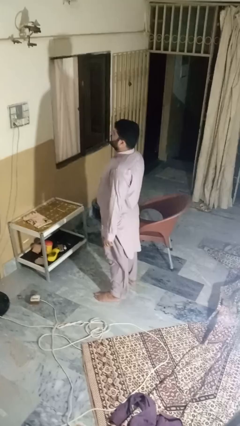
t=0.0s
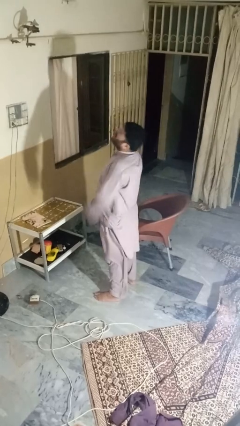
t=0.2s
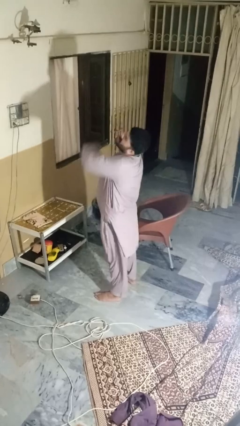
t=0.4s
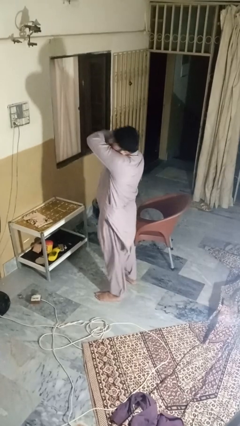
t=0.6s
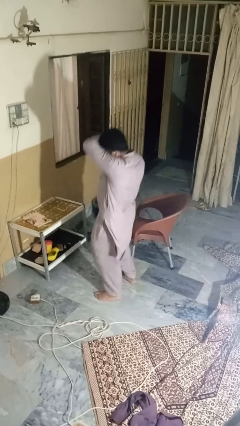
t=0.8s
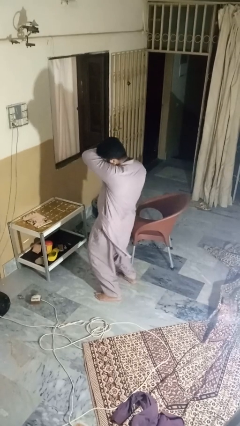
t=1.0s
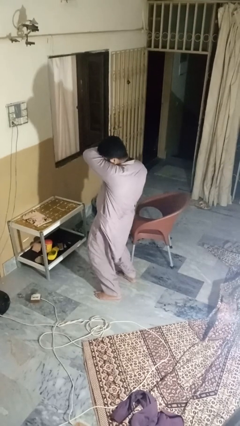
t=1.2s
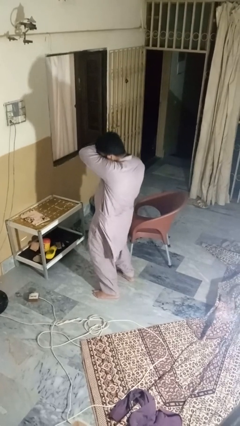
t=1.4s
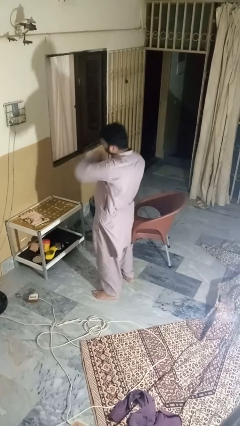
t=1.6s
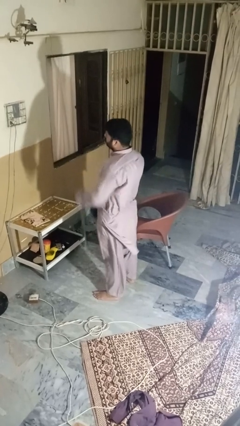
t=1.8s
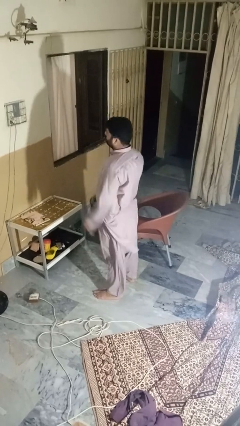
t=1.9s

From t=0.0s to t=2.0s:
person sneezes into arm

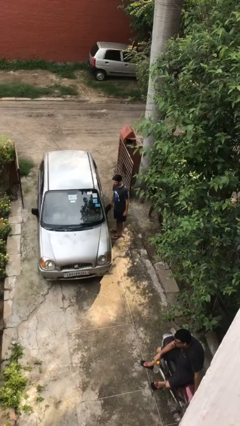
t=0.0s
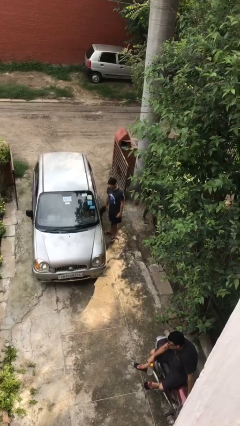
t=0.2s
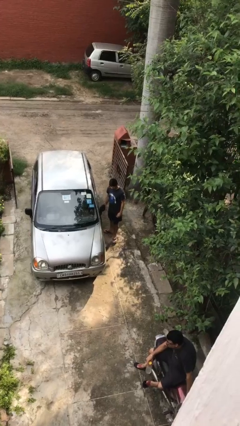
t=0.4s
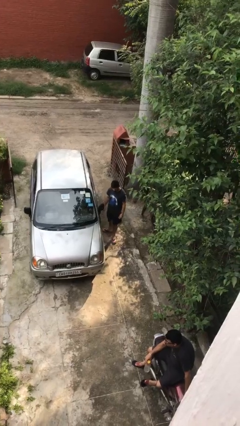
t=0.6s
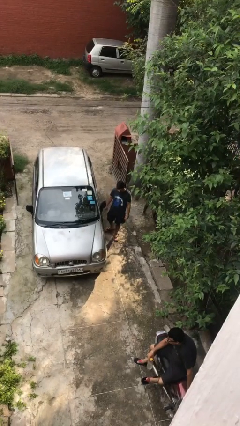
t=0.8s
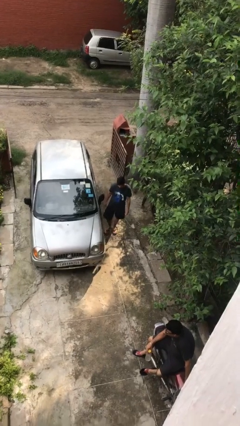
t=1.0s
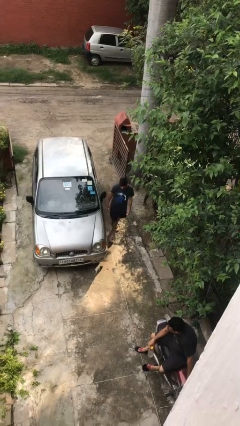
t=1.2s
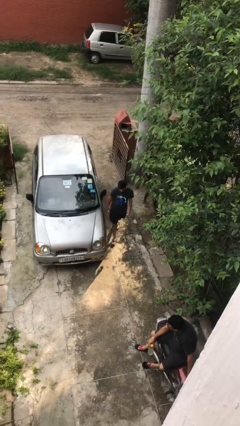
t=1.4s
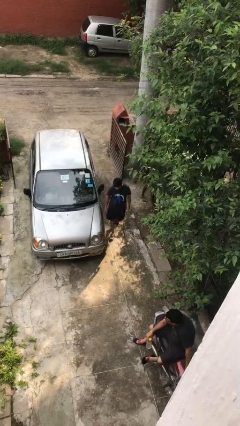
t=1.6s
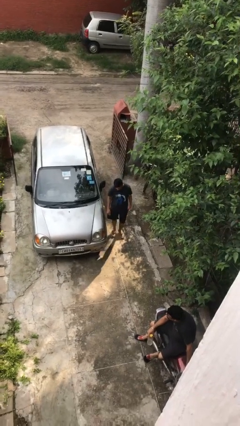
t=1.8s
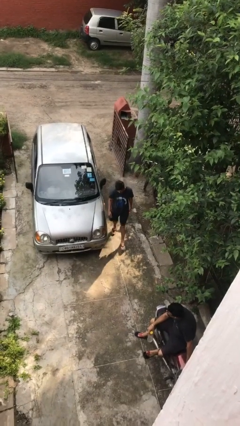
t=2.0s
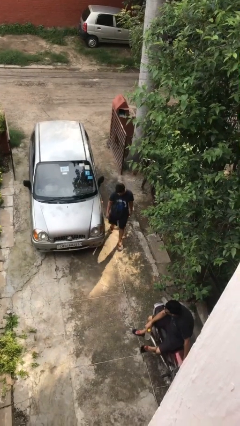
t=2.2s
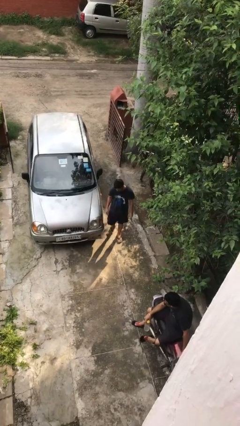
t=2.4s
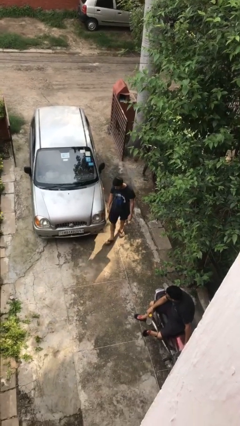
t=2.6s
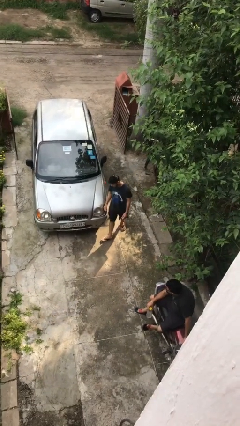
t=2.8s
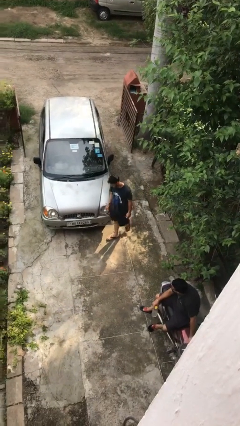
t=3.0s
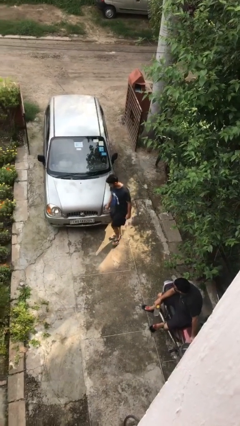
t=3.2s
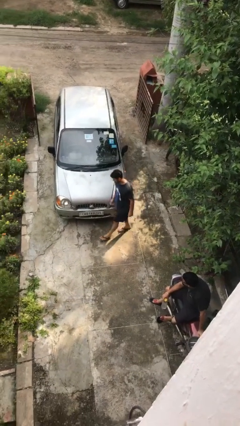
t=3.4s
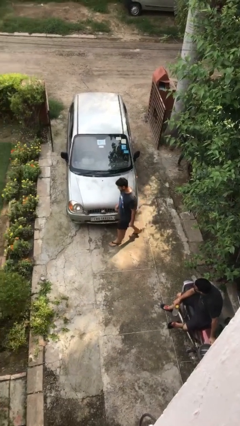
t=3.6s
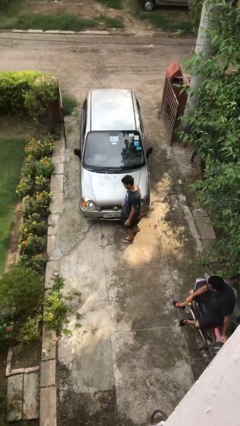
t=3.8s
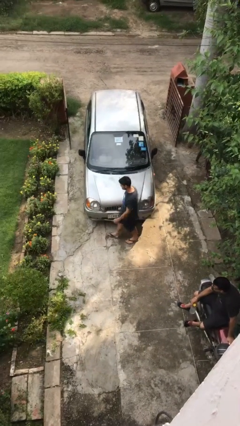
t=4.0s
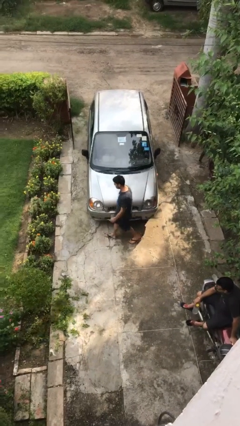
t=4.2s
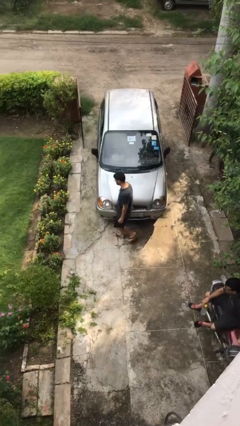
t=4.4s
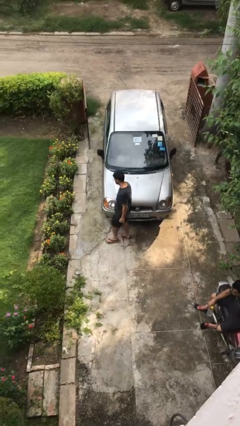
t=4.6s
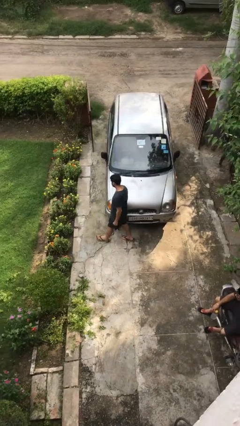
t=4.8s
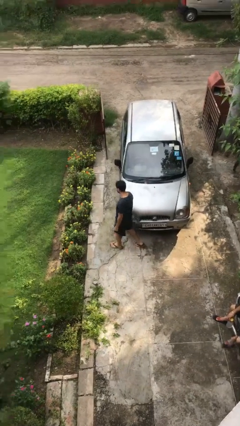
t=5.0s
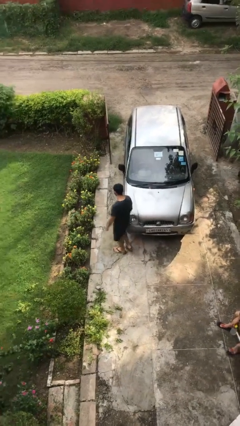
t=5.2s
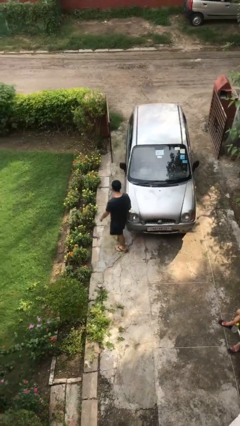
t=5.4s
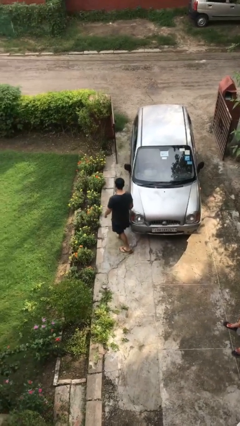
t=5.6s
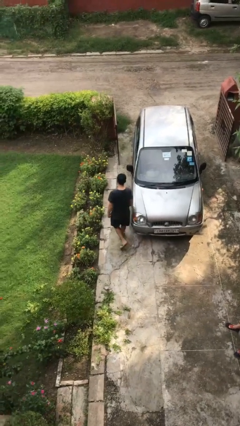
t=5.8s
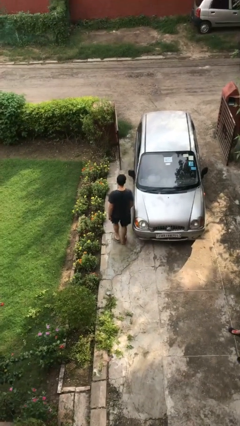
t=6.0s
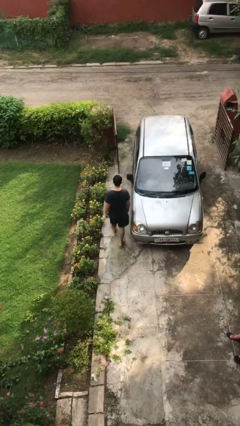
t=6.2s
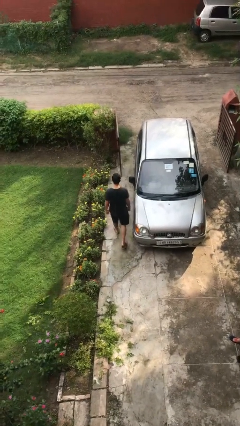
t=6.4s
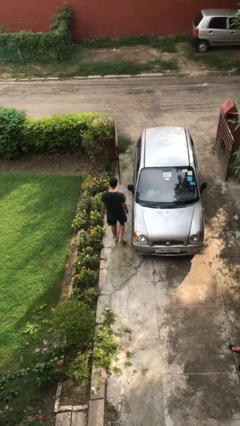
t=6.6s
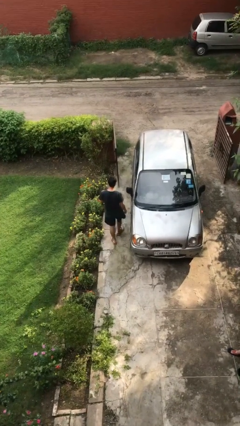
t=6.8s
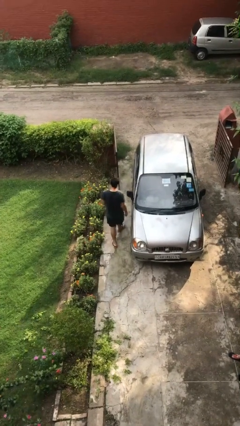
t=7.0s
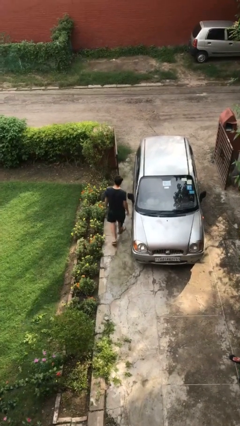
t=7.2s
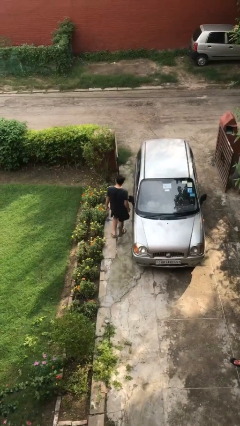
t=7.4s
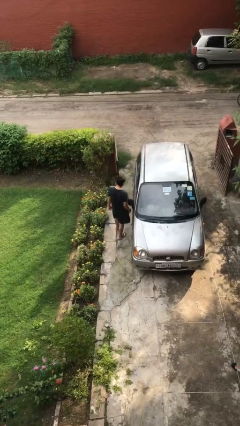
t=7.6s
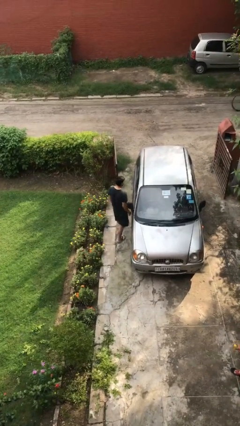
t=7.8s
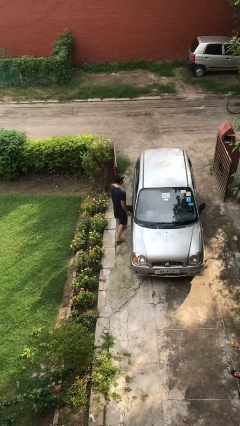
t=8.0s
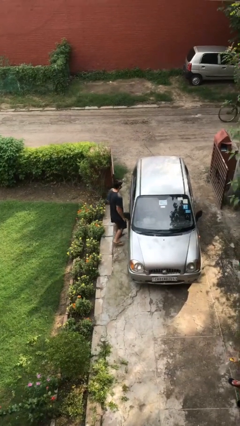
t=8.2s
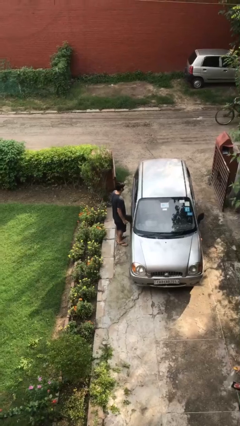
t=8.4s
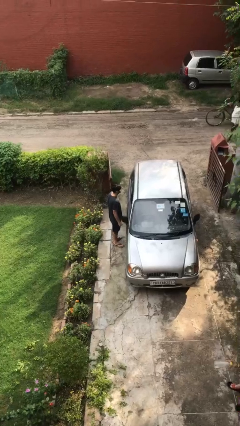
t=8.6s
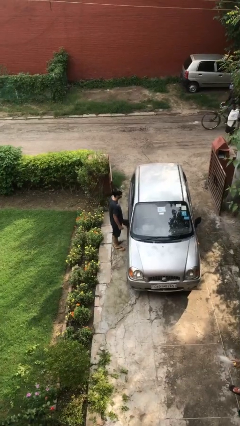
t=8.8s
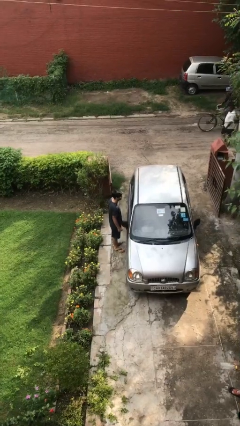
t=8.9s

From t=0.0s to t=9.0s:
person walks around car

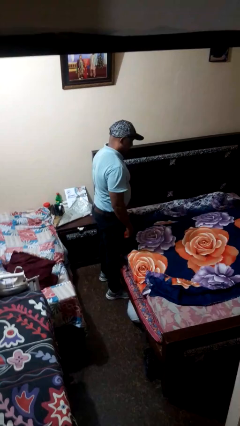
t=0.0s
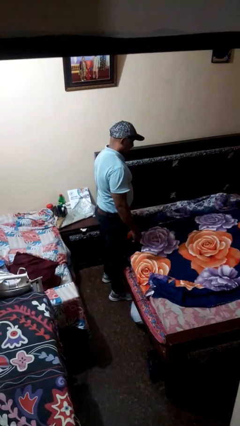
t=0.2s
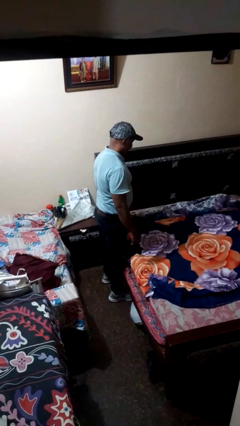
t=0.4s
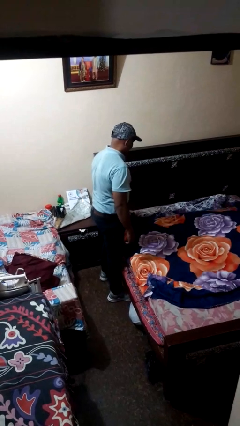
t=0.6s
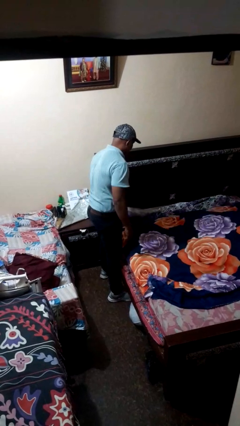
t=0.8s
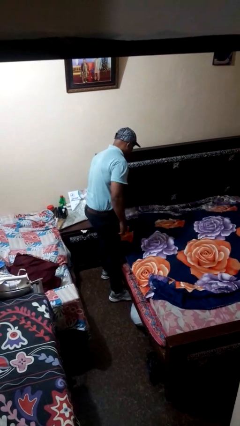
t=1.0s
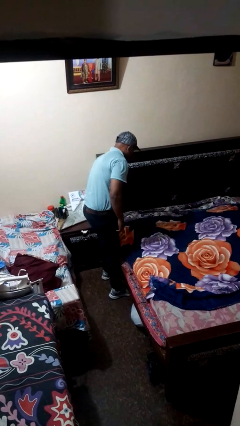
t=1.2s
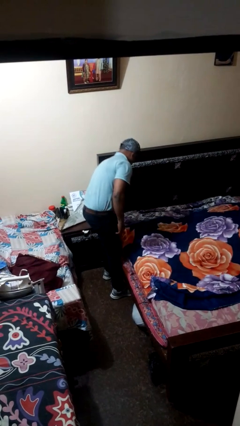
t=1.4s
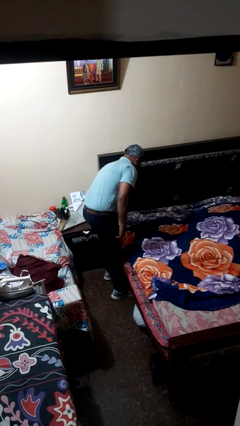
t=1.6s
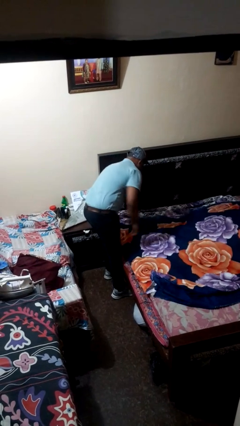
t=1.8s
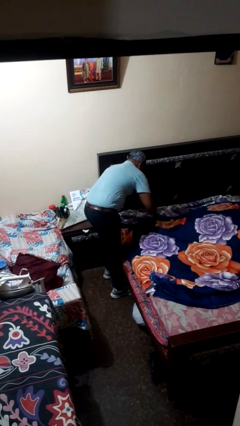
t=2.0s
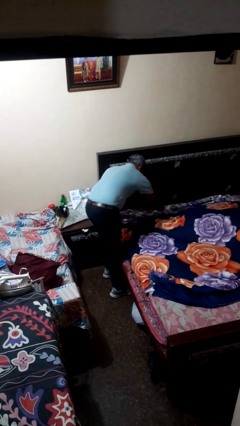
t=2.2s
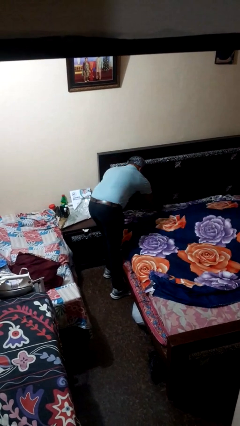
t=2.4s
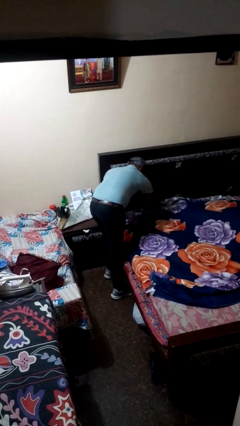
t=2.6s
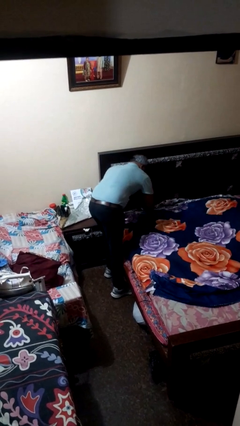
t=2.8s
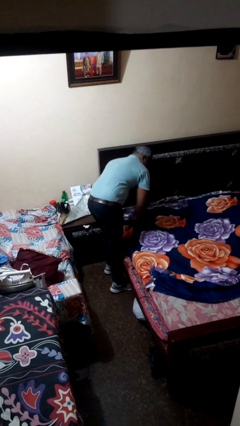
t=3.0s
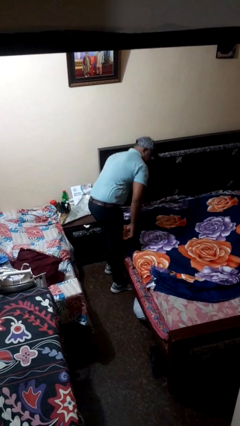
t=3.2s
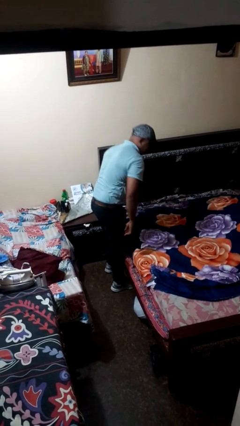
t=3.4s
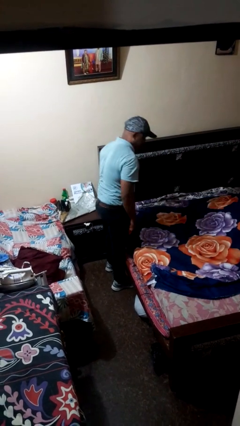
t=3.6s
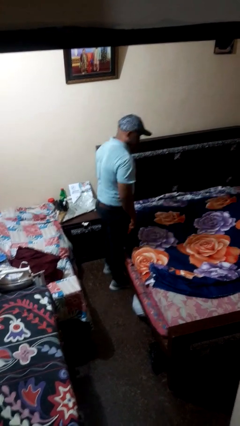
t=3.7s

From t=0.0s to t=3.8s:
person makes bed

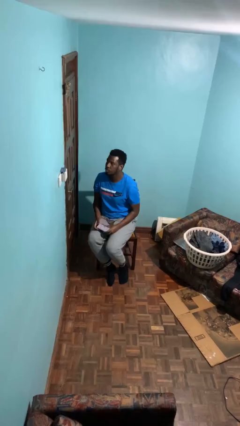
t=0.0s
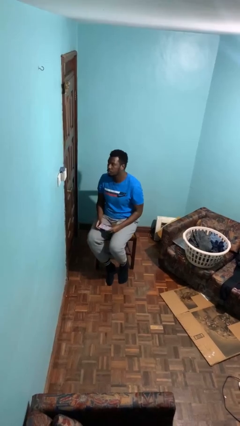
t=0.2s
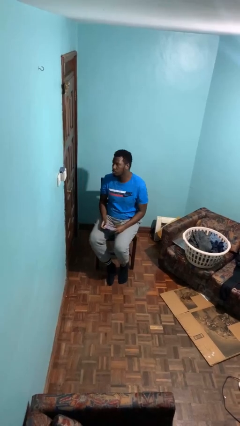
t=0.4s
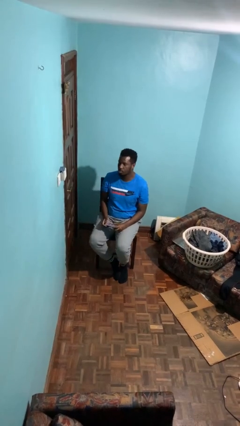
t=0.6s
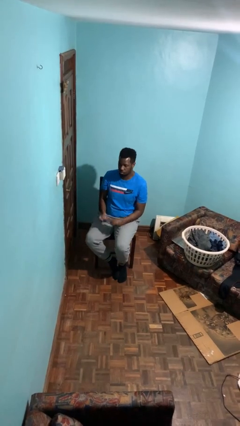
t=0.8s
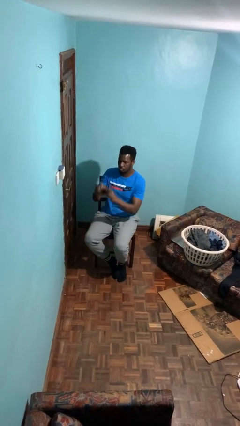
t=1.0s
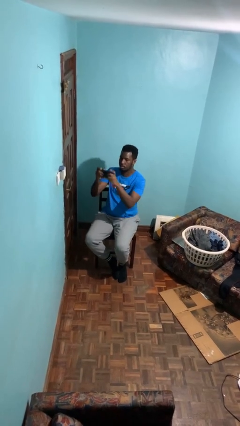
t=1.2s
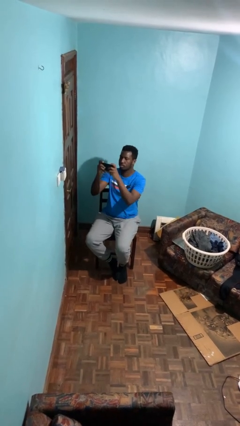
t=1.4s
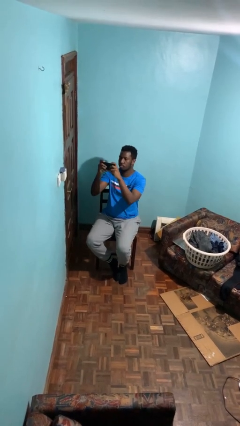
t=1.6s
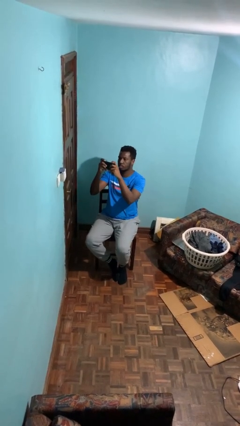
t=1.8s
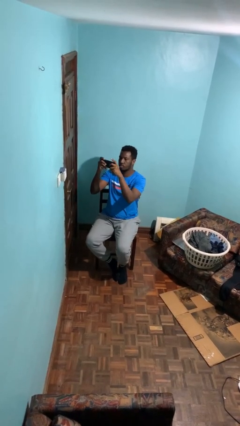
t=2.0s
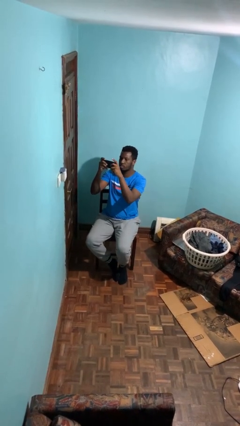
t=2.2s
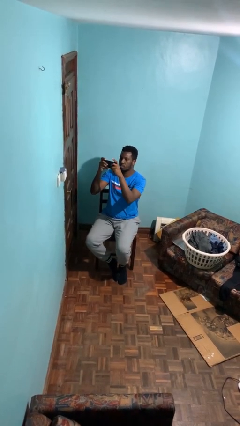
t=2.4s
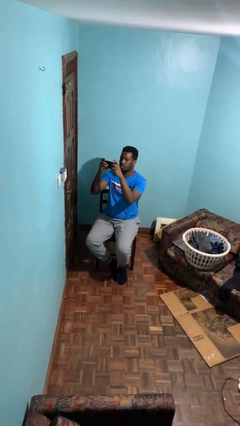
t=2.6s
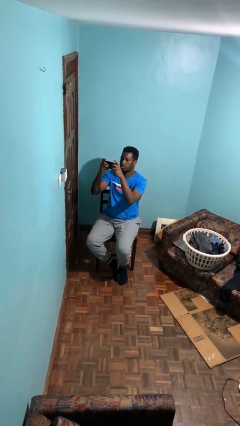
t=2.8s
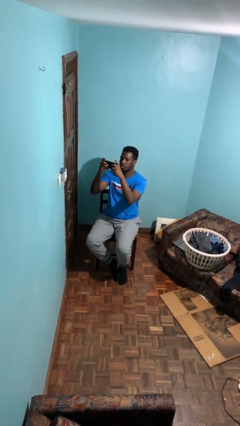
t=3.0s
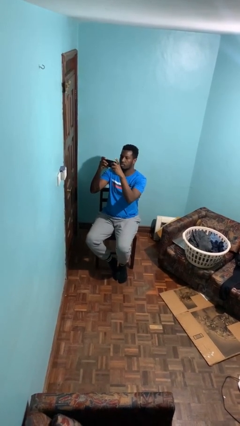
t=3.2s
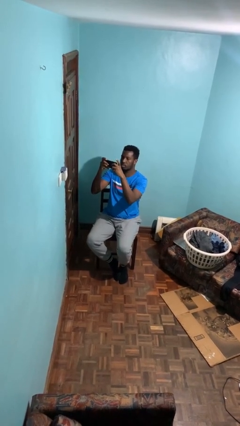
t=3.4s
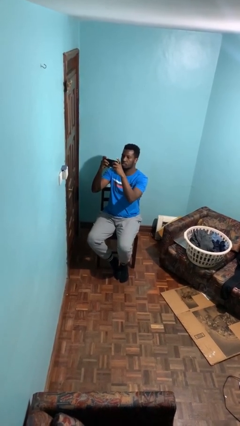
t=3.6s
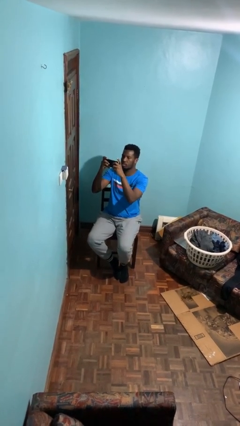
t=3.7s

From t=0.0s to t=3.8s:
person interacts with handheld game
